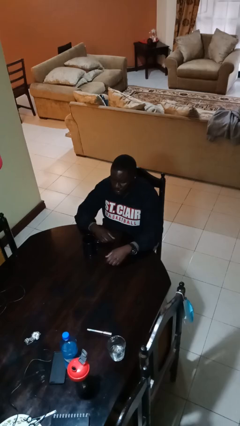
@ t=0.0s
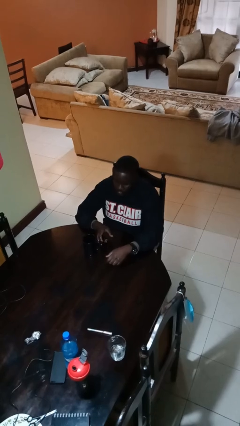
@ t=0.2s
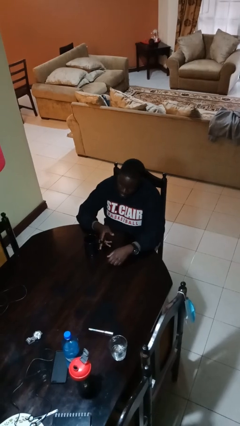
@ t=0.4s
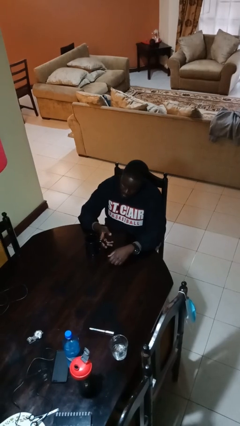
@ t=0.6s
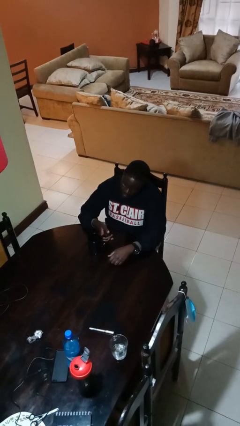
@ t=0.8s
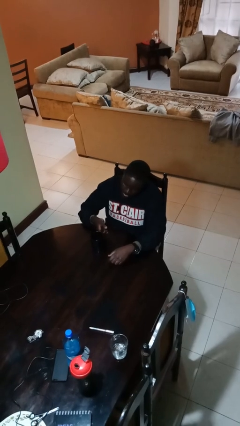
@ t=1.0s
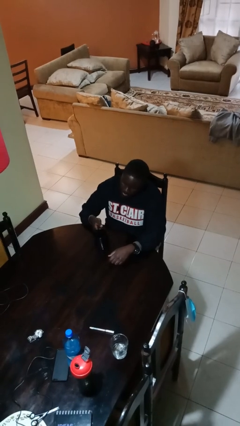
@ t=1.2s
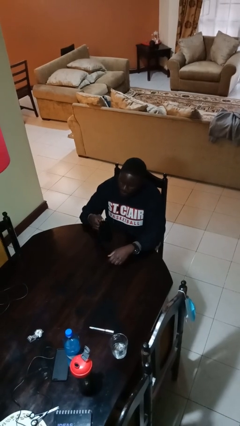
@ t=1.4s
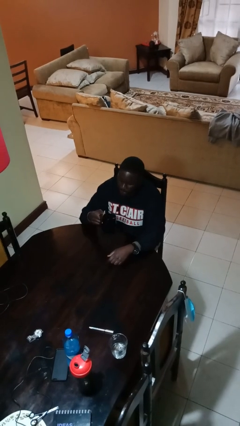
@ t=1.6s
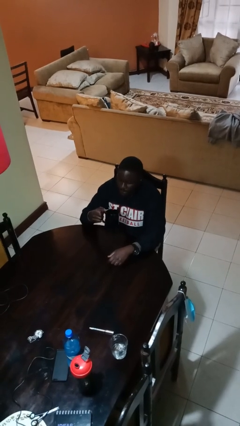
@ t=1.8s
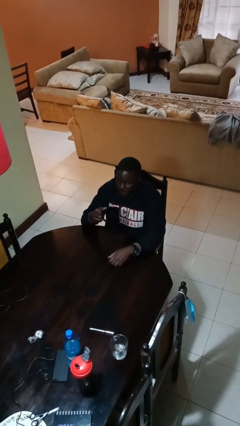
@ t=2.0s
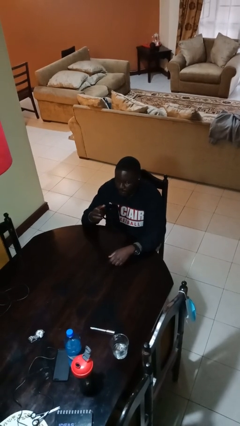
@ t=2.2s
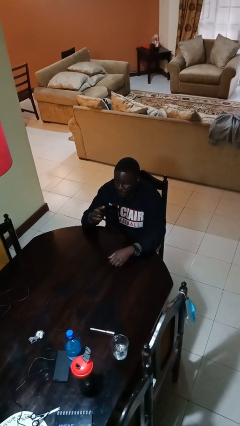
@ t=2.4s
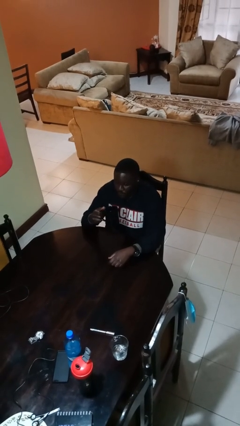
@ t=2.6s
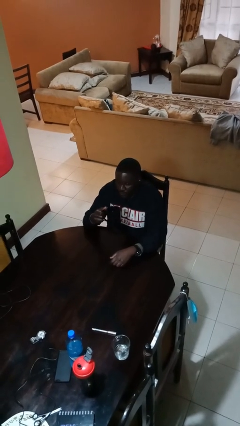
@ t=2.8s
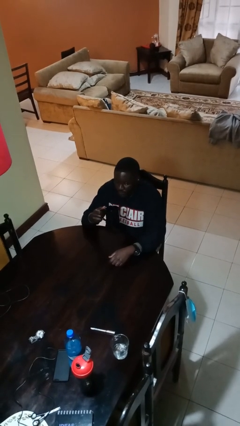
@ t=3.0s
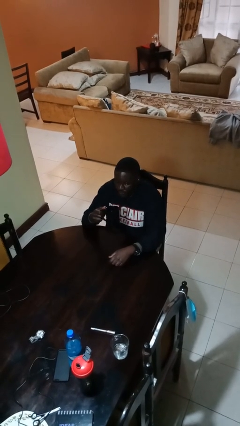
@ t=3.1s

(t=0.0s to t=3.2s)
person picks up object from table

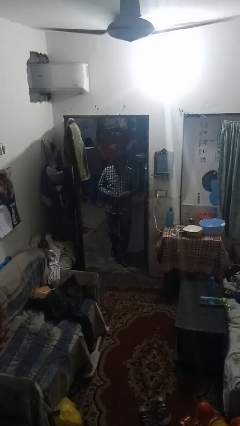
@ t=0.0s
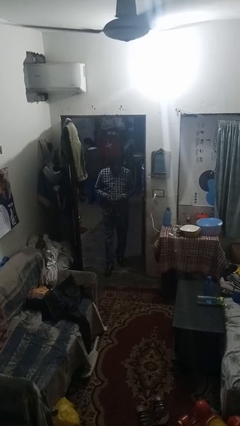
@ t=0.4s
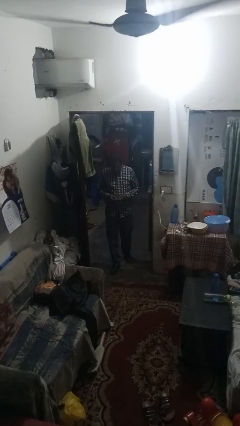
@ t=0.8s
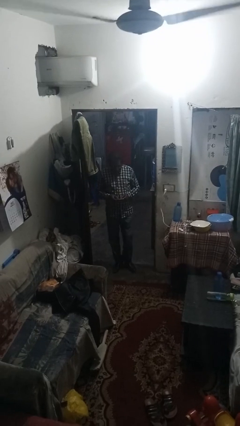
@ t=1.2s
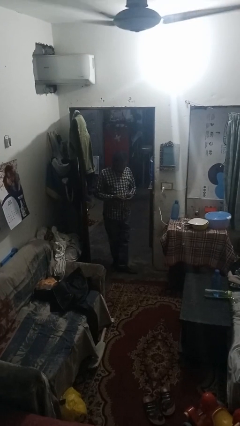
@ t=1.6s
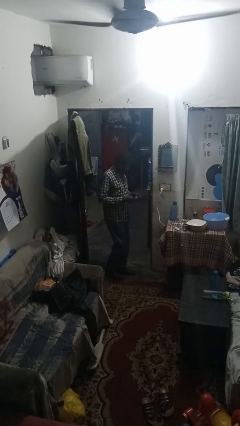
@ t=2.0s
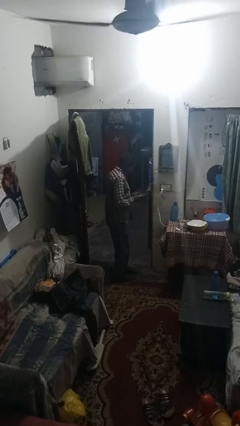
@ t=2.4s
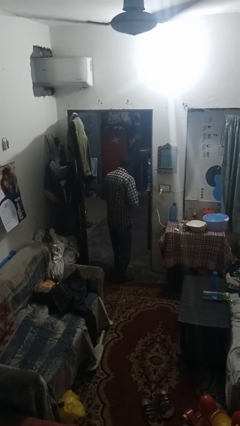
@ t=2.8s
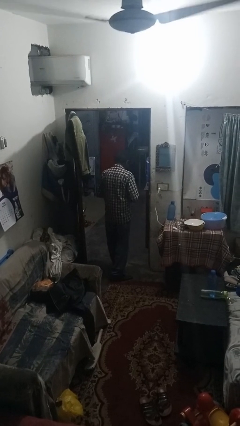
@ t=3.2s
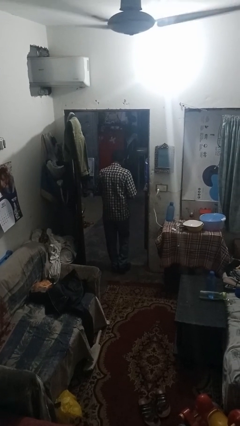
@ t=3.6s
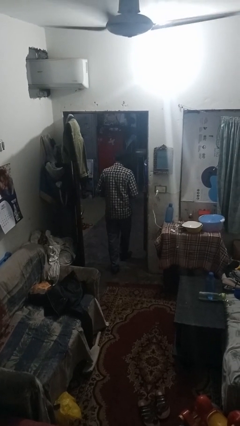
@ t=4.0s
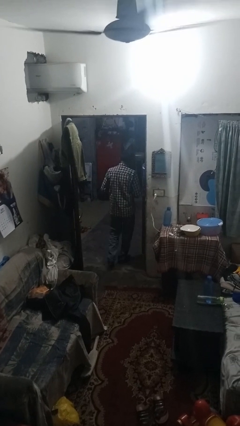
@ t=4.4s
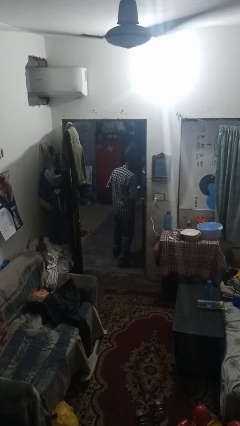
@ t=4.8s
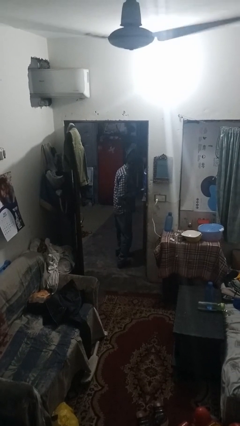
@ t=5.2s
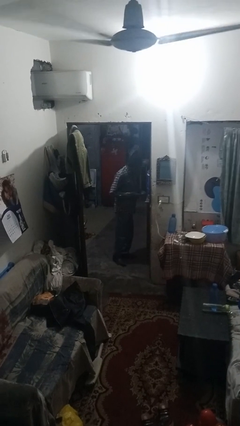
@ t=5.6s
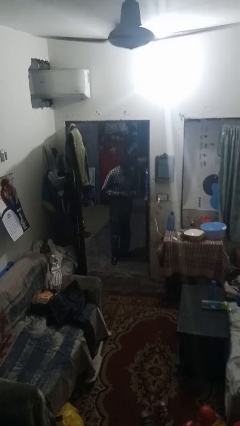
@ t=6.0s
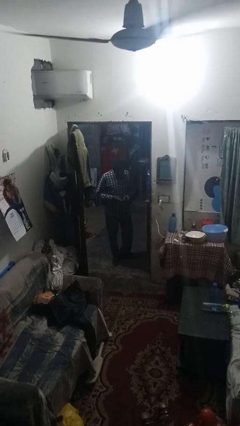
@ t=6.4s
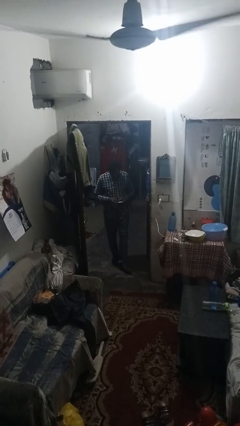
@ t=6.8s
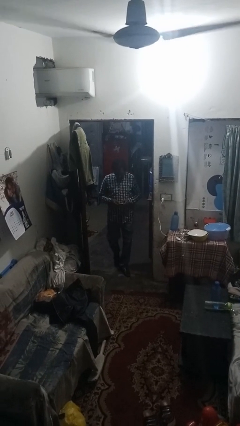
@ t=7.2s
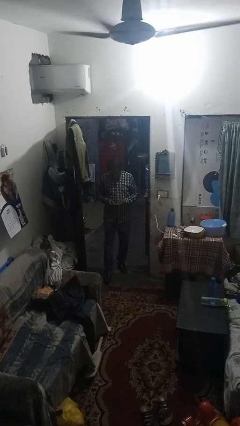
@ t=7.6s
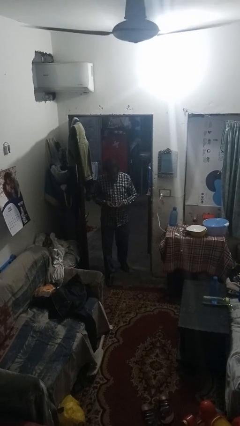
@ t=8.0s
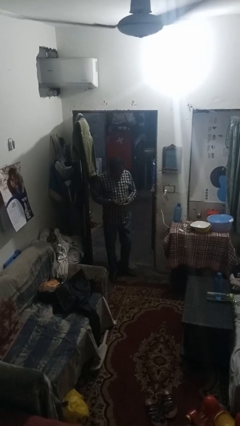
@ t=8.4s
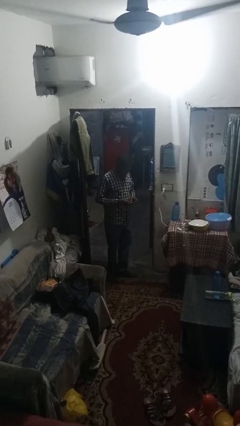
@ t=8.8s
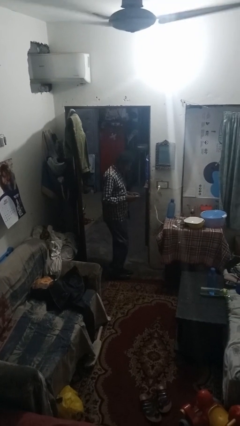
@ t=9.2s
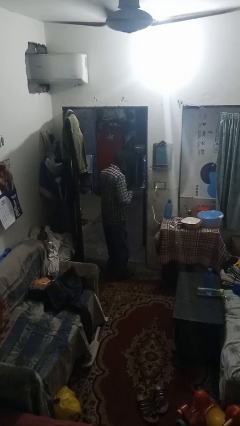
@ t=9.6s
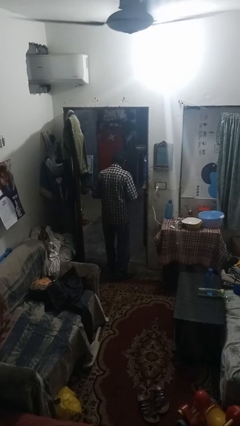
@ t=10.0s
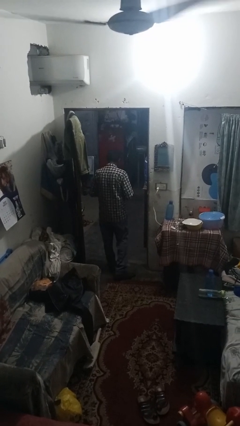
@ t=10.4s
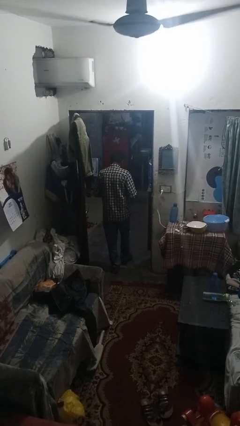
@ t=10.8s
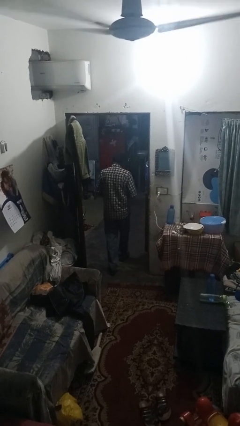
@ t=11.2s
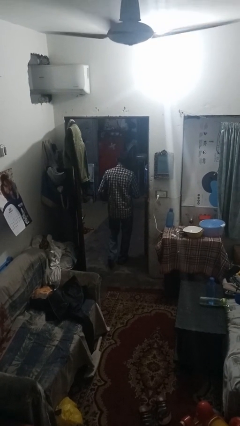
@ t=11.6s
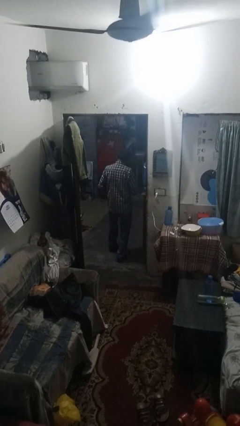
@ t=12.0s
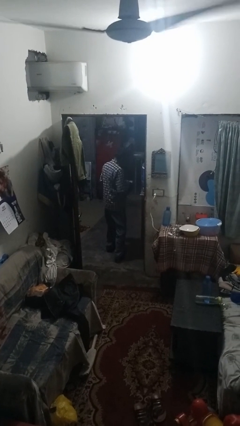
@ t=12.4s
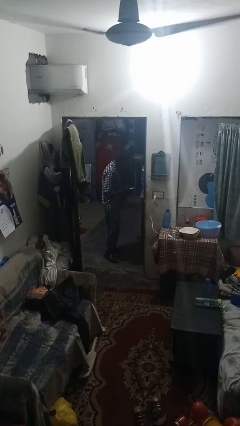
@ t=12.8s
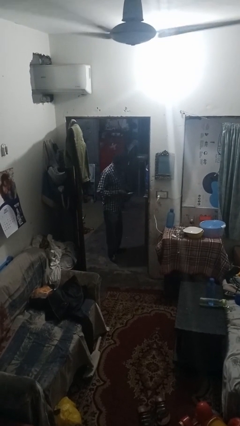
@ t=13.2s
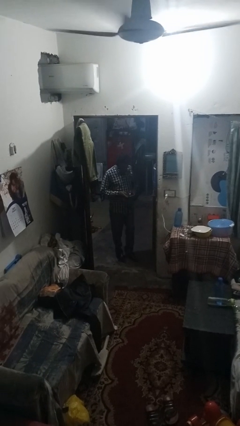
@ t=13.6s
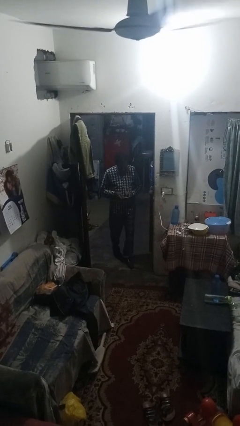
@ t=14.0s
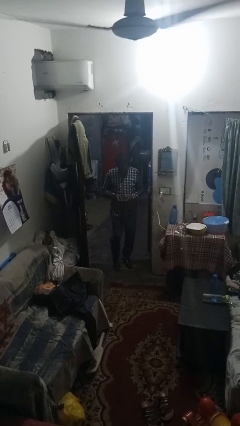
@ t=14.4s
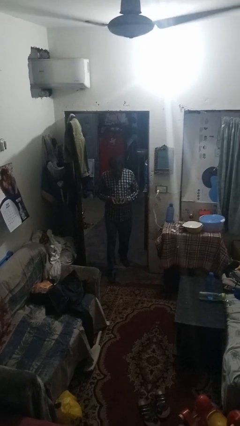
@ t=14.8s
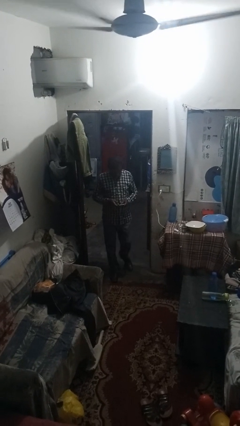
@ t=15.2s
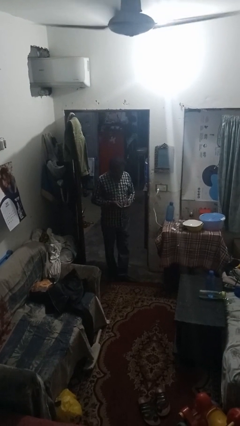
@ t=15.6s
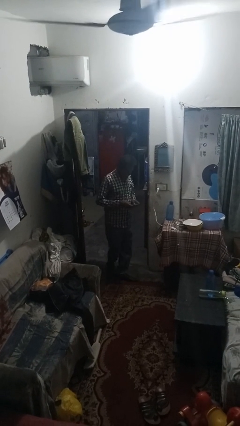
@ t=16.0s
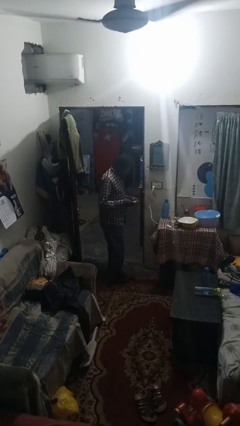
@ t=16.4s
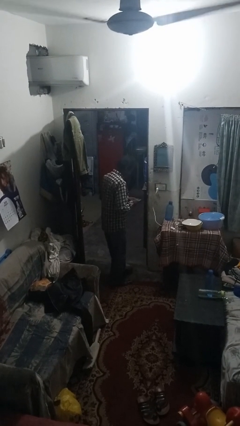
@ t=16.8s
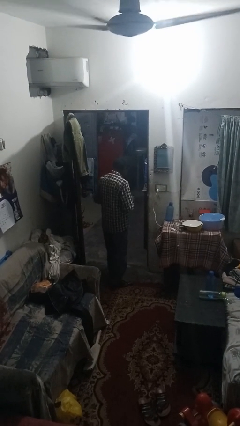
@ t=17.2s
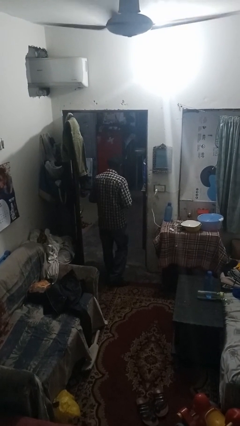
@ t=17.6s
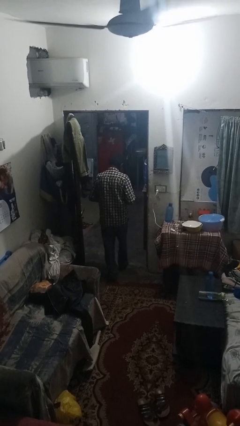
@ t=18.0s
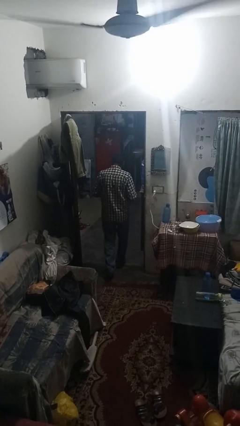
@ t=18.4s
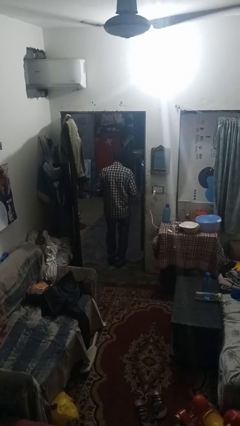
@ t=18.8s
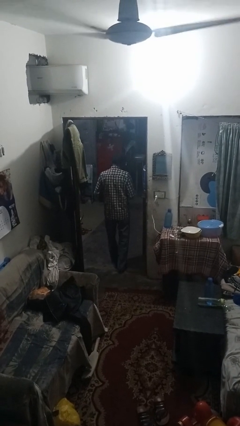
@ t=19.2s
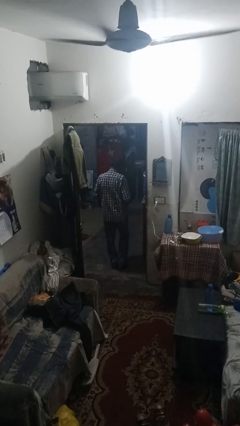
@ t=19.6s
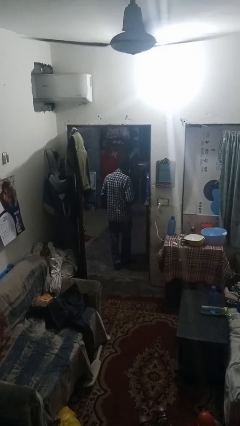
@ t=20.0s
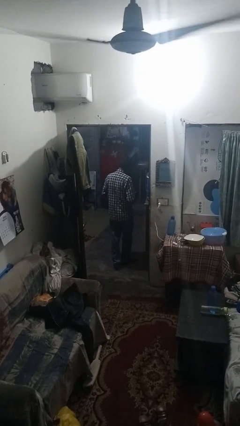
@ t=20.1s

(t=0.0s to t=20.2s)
person texts on phone

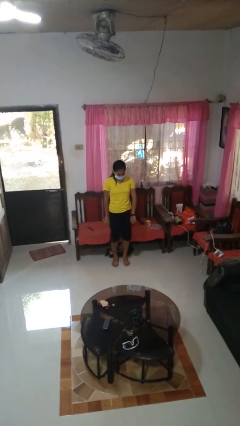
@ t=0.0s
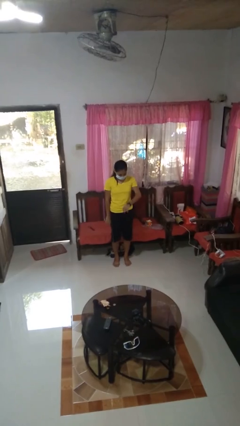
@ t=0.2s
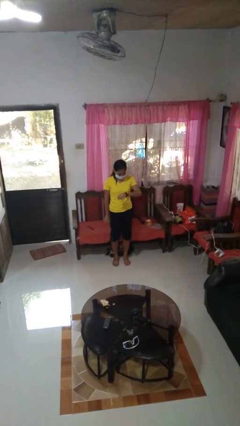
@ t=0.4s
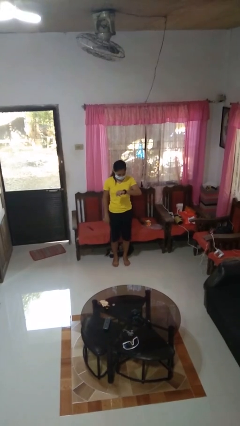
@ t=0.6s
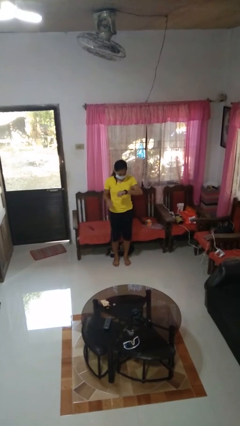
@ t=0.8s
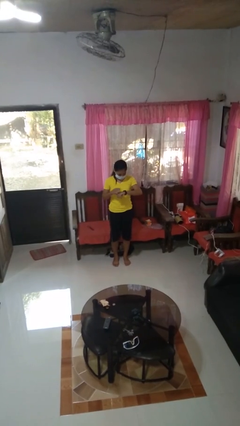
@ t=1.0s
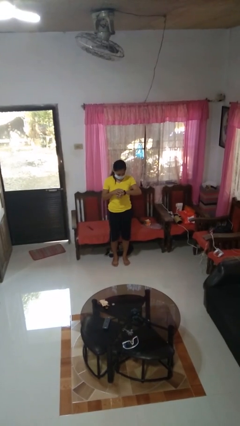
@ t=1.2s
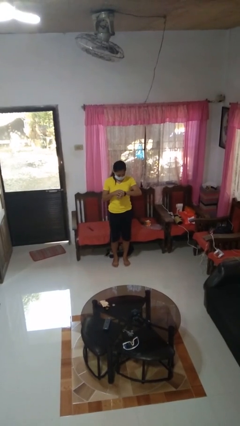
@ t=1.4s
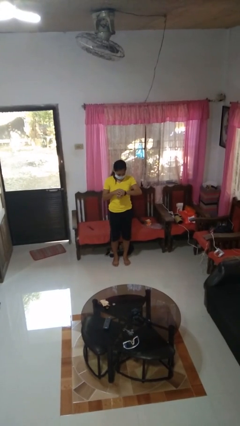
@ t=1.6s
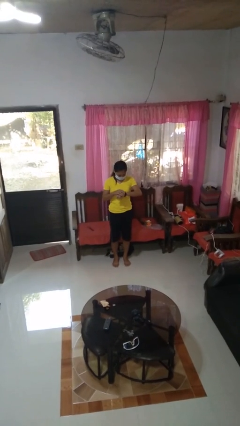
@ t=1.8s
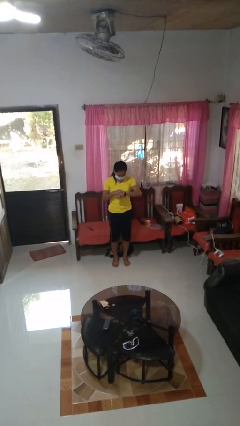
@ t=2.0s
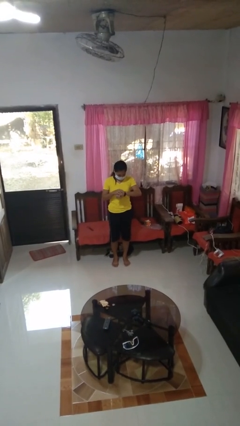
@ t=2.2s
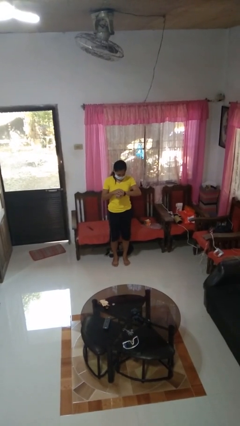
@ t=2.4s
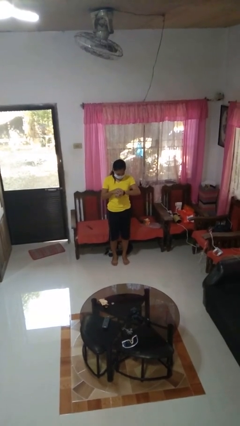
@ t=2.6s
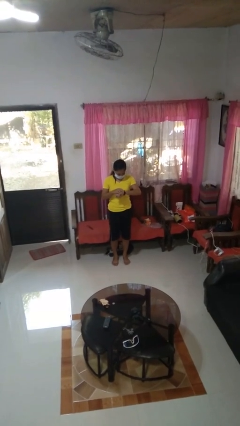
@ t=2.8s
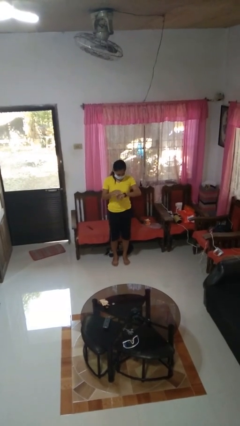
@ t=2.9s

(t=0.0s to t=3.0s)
person looks at wristwatch

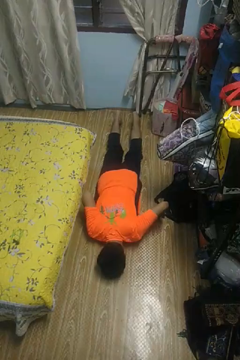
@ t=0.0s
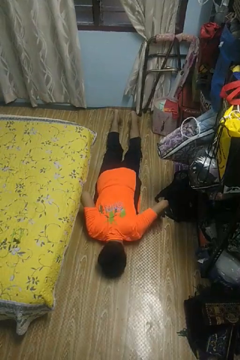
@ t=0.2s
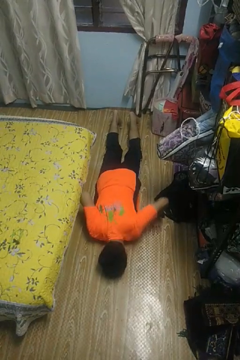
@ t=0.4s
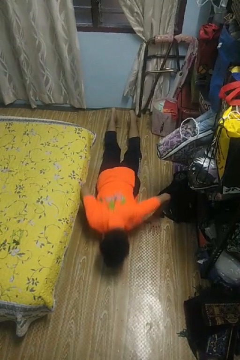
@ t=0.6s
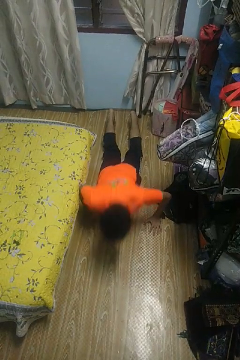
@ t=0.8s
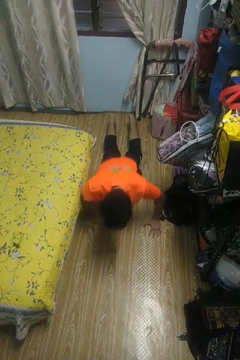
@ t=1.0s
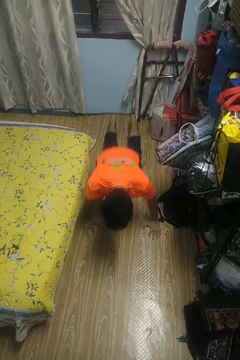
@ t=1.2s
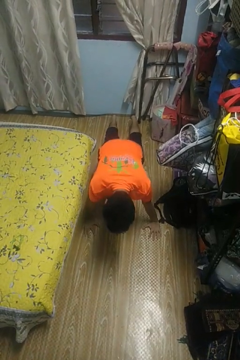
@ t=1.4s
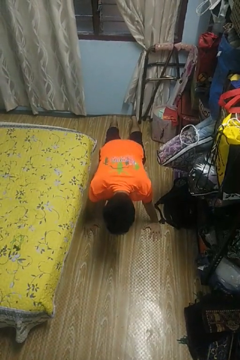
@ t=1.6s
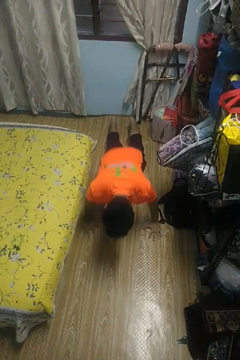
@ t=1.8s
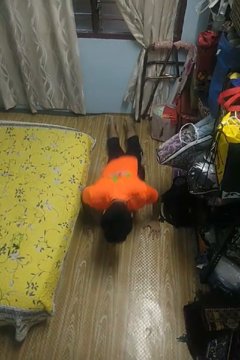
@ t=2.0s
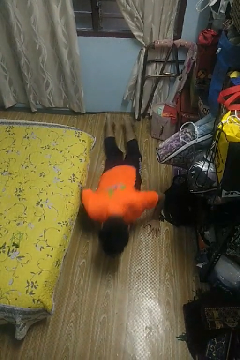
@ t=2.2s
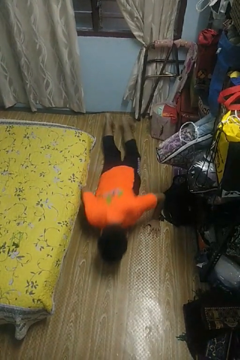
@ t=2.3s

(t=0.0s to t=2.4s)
person exercises with pushup
